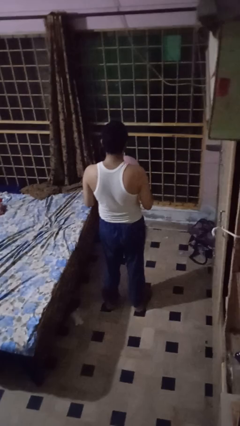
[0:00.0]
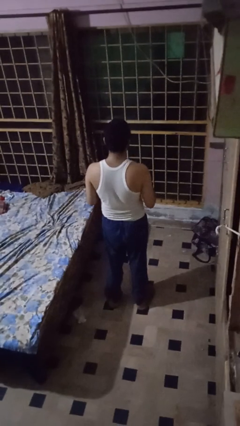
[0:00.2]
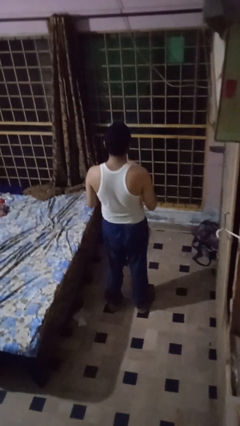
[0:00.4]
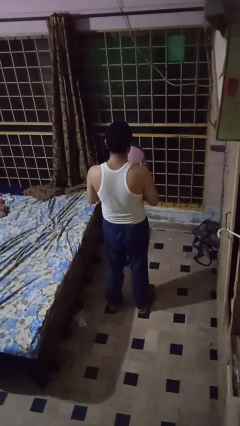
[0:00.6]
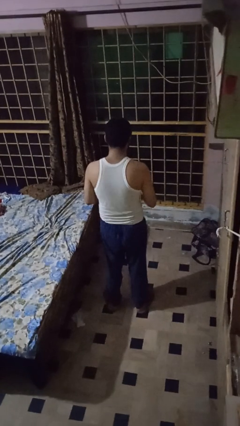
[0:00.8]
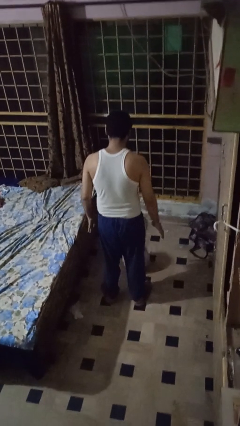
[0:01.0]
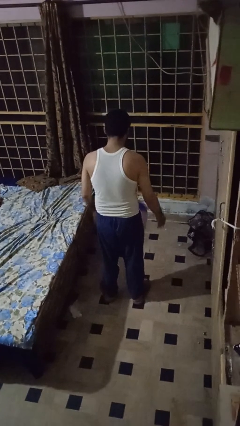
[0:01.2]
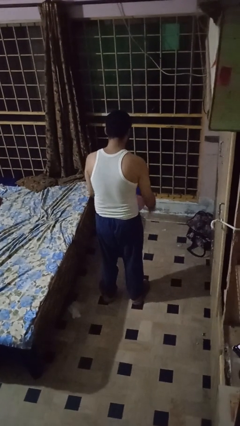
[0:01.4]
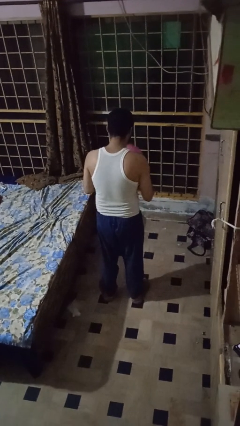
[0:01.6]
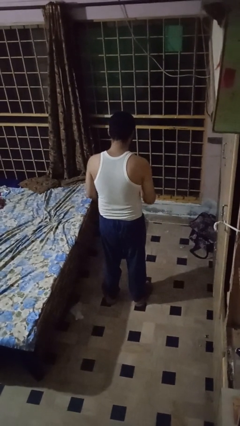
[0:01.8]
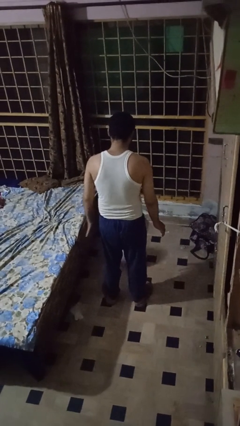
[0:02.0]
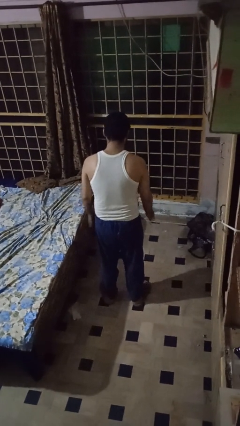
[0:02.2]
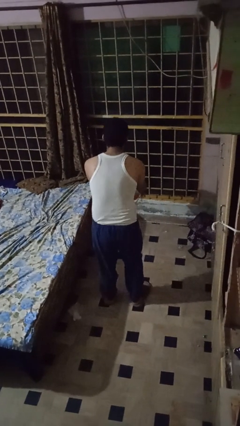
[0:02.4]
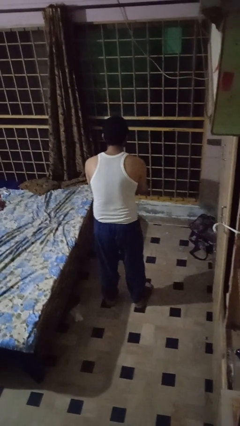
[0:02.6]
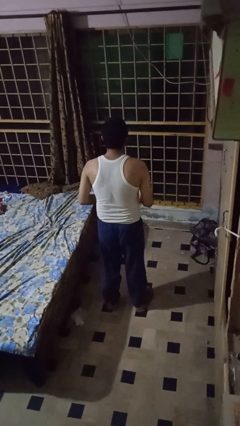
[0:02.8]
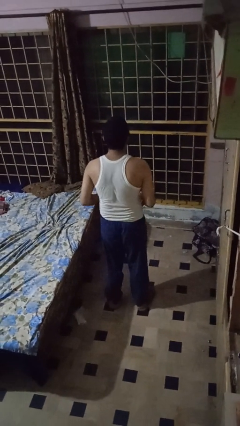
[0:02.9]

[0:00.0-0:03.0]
person bounces ball on floor

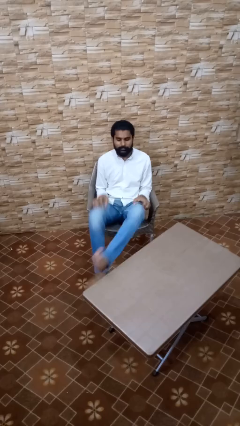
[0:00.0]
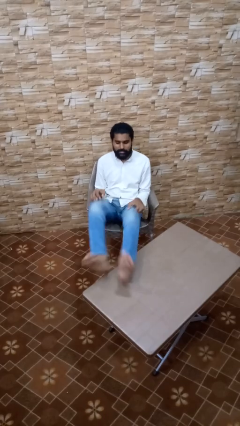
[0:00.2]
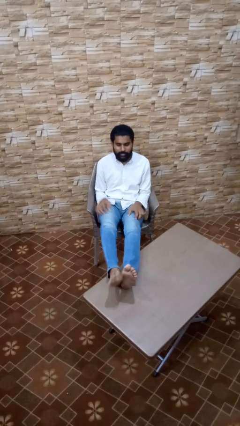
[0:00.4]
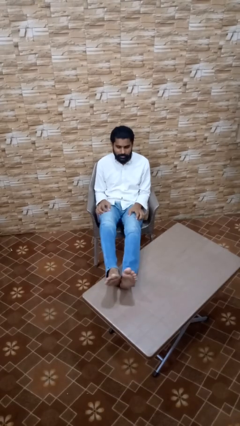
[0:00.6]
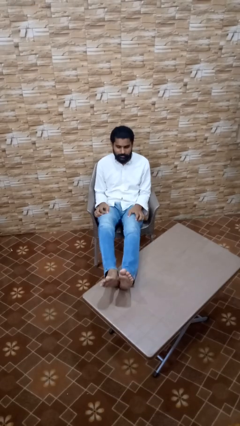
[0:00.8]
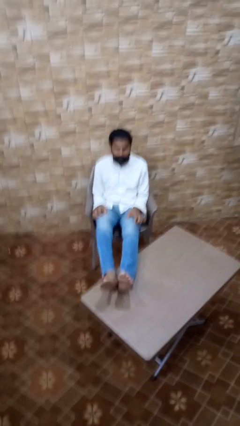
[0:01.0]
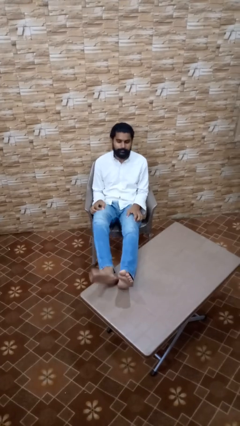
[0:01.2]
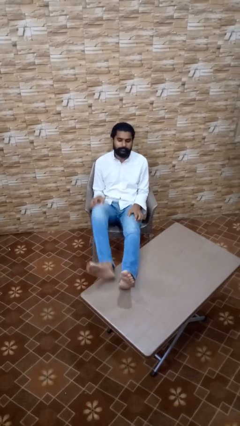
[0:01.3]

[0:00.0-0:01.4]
person puts feet up

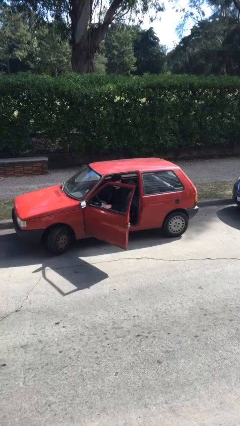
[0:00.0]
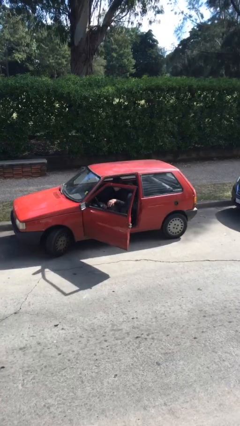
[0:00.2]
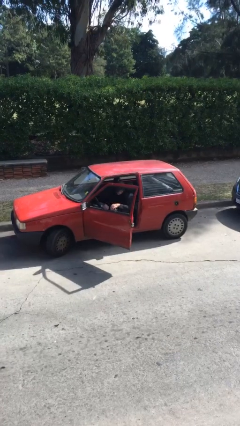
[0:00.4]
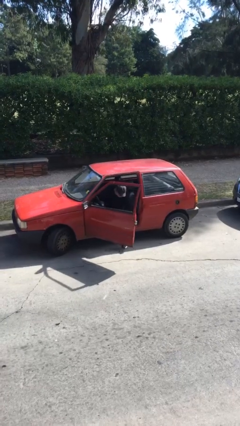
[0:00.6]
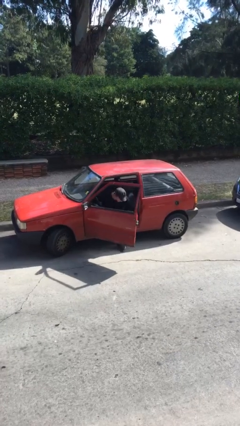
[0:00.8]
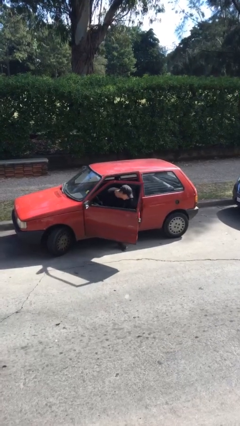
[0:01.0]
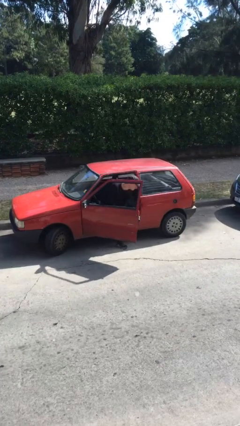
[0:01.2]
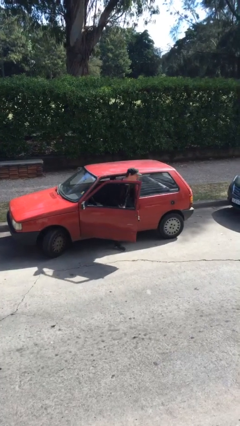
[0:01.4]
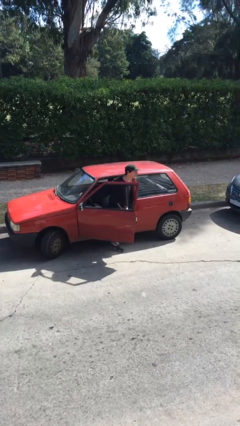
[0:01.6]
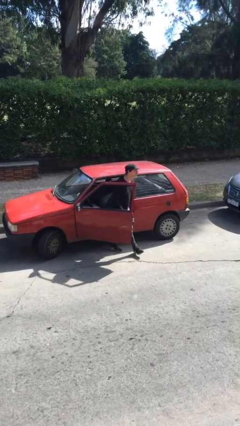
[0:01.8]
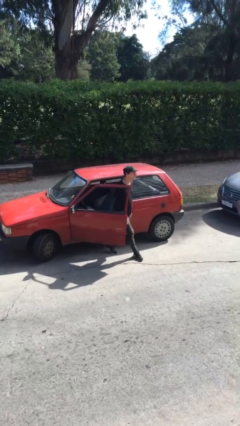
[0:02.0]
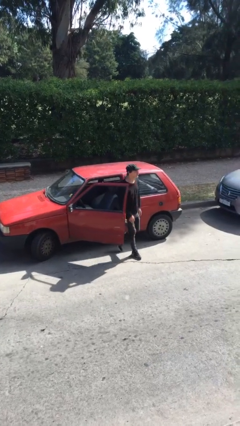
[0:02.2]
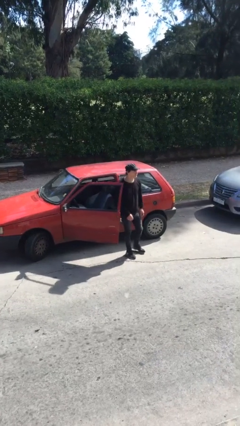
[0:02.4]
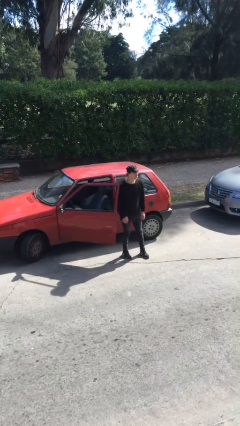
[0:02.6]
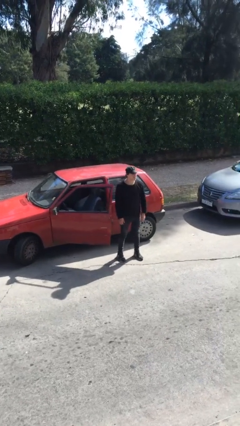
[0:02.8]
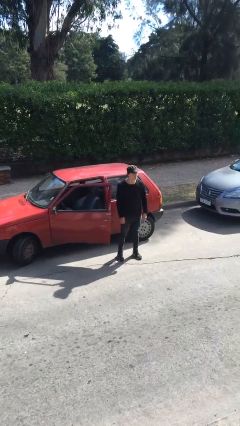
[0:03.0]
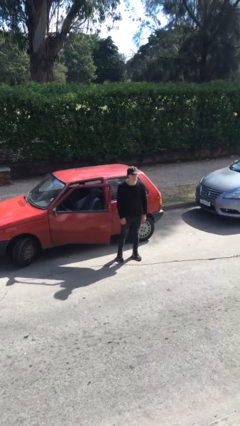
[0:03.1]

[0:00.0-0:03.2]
person exits car

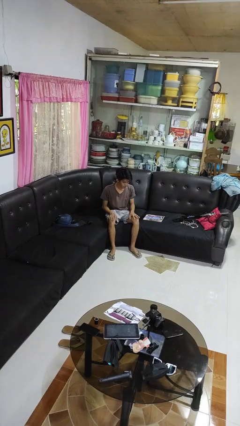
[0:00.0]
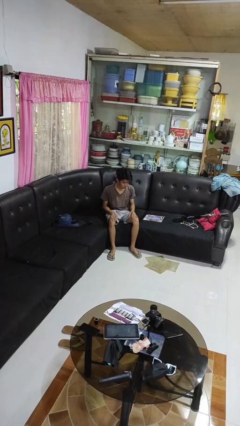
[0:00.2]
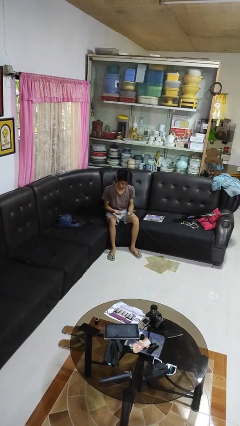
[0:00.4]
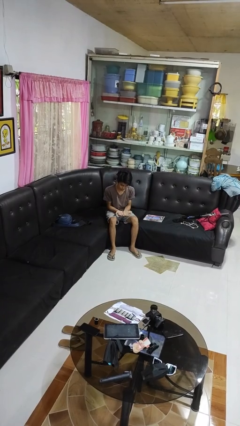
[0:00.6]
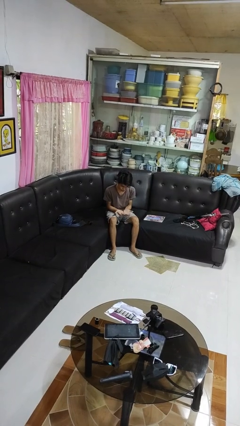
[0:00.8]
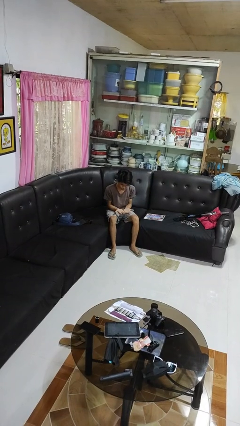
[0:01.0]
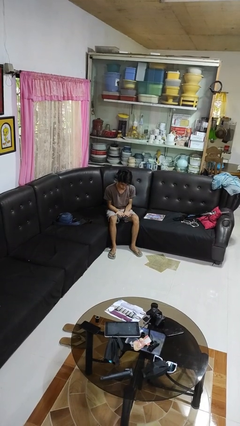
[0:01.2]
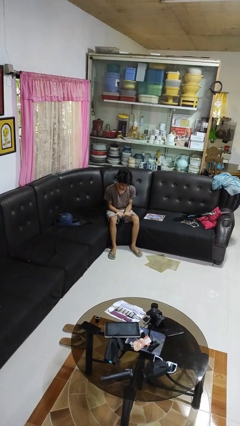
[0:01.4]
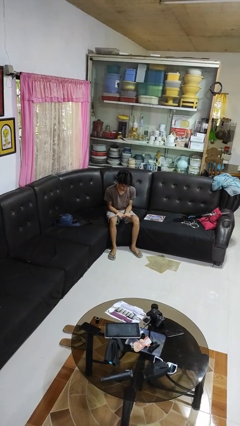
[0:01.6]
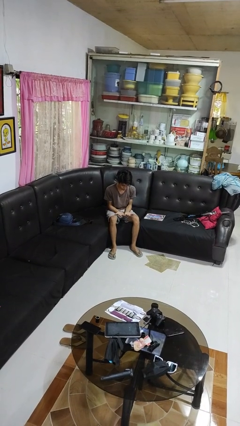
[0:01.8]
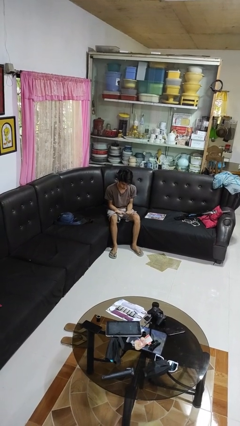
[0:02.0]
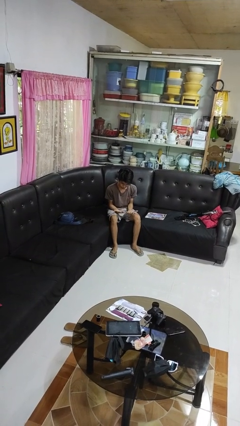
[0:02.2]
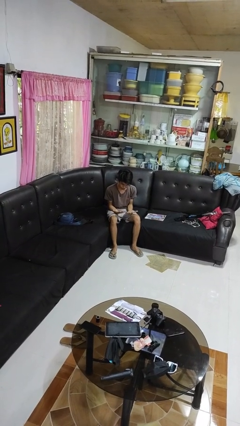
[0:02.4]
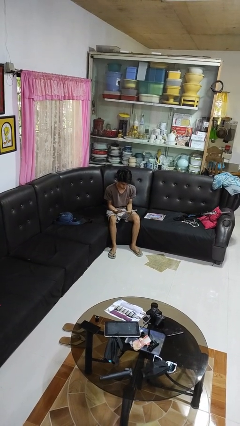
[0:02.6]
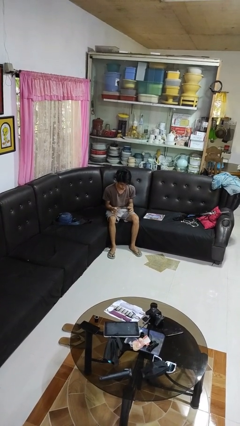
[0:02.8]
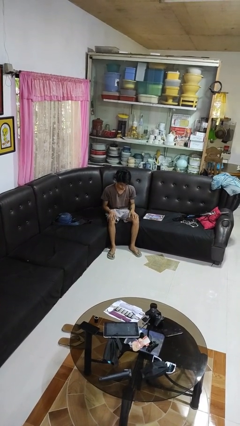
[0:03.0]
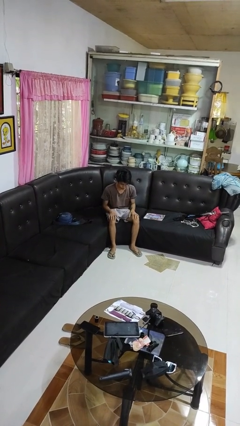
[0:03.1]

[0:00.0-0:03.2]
person looks at hands in lap

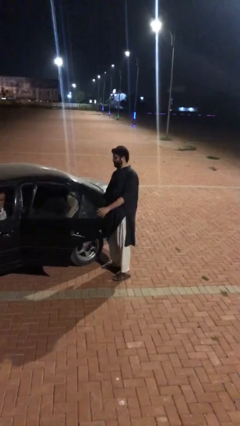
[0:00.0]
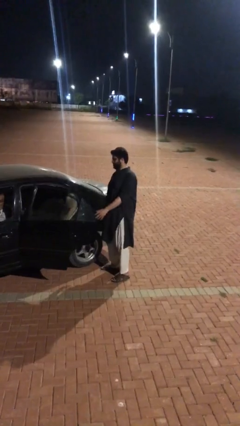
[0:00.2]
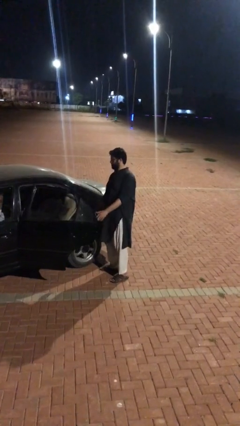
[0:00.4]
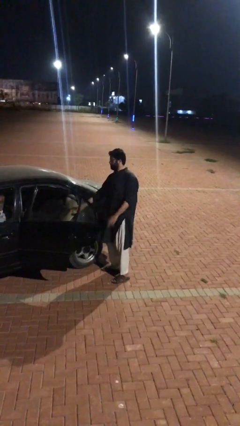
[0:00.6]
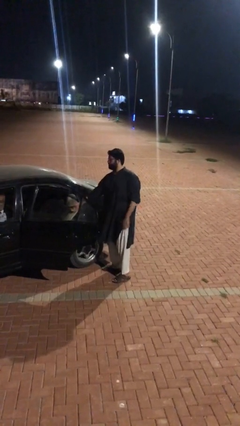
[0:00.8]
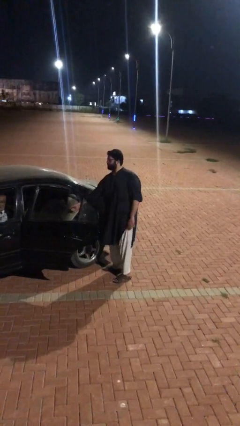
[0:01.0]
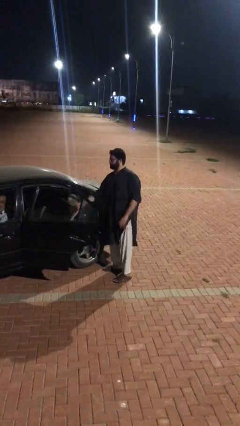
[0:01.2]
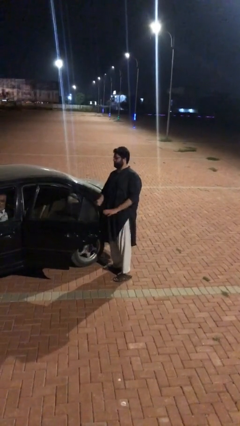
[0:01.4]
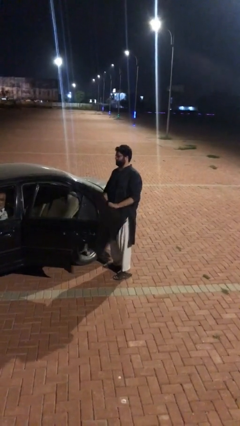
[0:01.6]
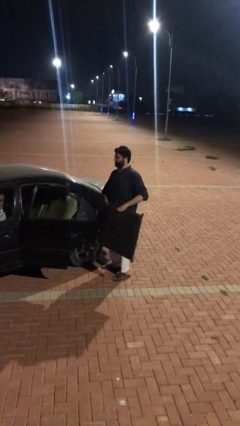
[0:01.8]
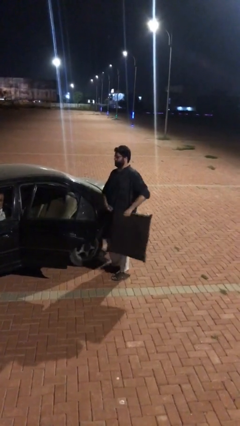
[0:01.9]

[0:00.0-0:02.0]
person unloads car

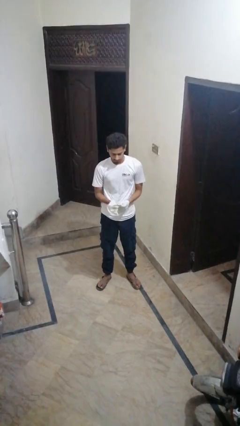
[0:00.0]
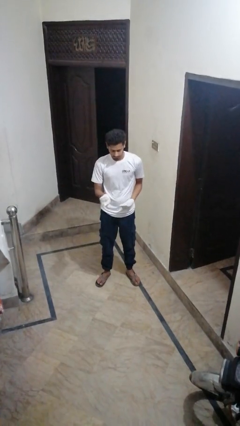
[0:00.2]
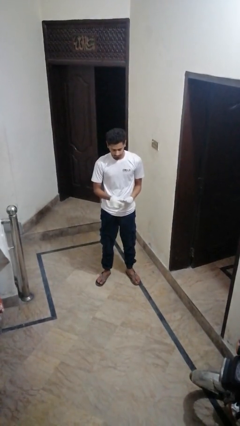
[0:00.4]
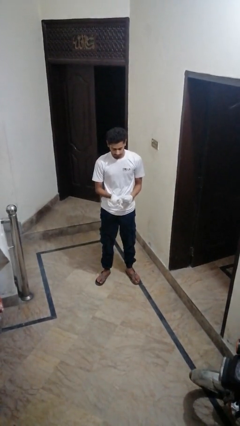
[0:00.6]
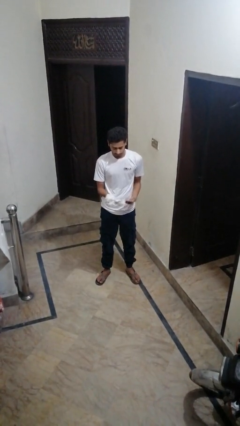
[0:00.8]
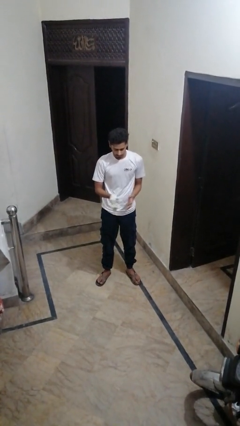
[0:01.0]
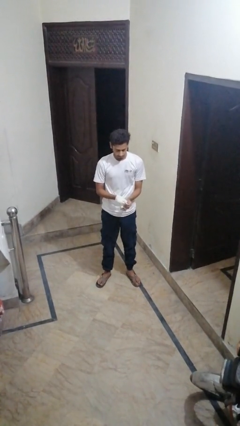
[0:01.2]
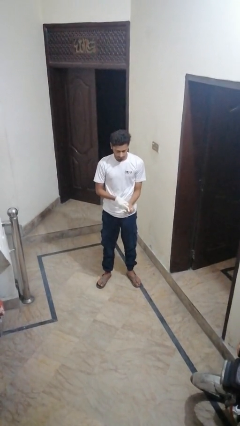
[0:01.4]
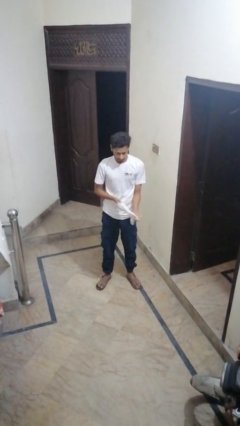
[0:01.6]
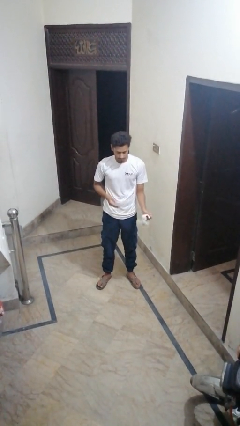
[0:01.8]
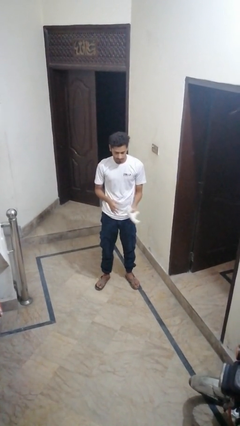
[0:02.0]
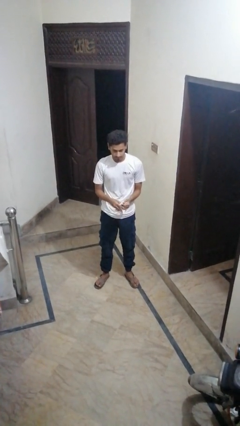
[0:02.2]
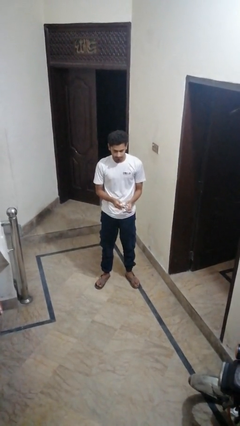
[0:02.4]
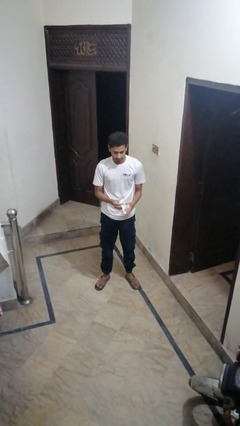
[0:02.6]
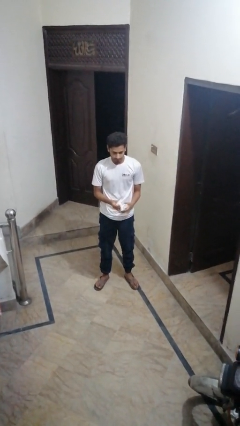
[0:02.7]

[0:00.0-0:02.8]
person takes off gloves

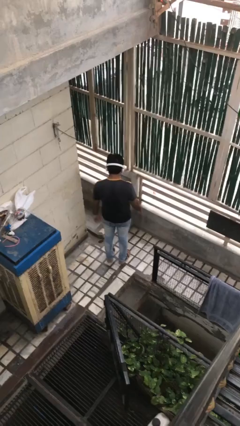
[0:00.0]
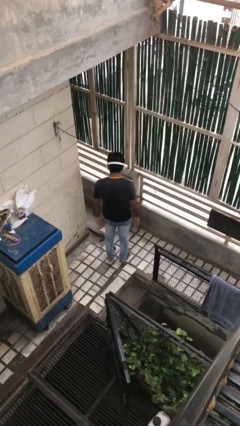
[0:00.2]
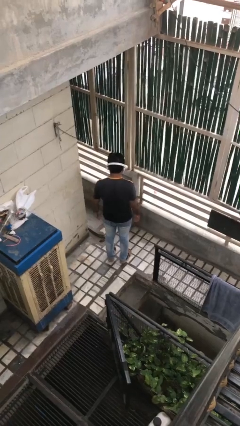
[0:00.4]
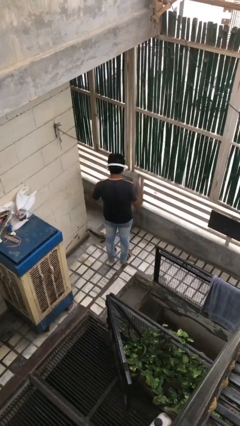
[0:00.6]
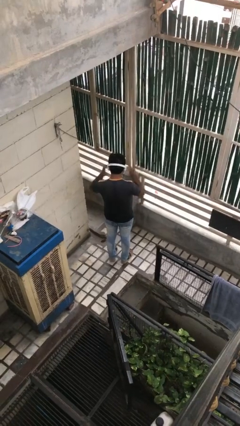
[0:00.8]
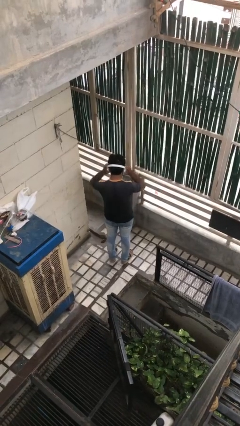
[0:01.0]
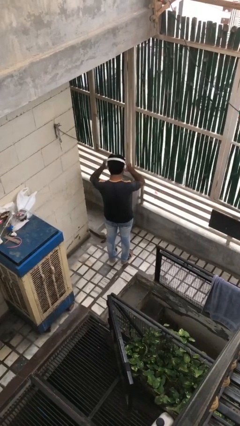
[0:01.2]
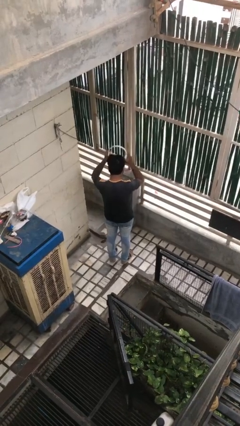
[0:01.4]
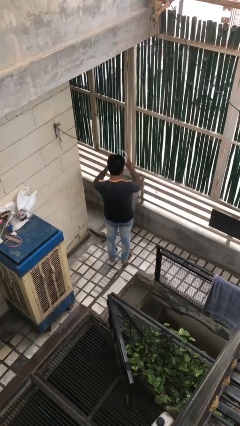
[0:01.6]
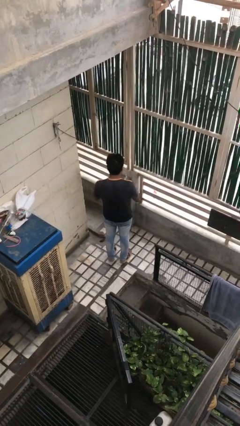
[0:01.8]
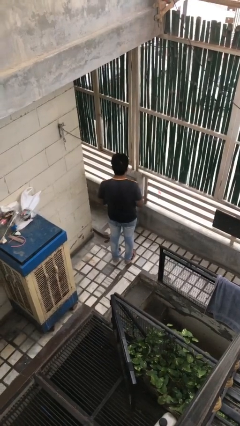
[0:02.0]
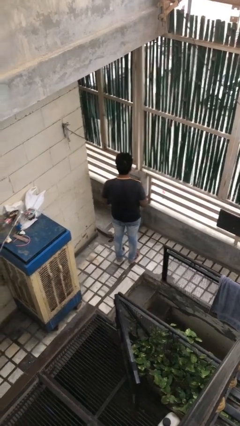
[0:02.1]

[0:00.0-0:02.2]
person takes off headphones
